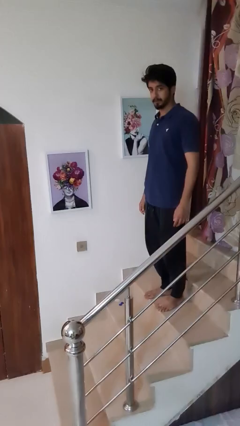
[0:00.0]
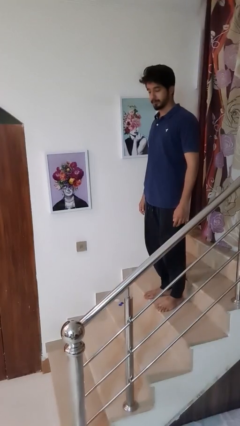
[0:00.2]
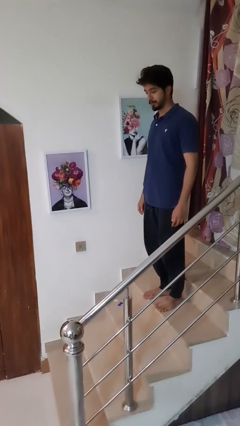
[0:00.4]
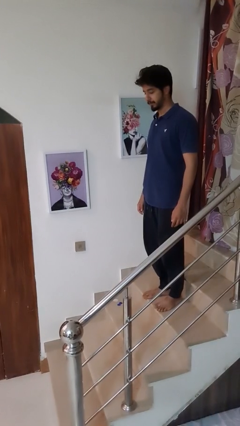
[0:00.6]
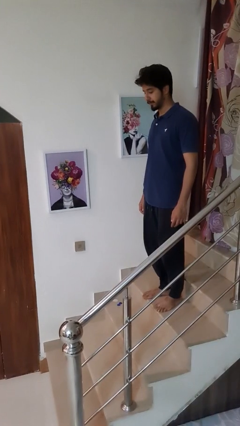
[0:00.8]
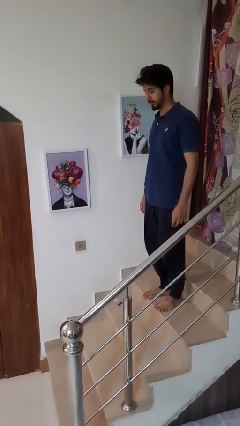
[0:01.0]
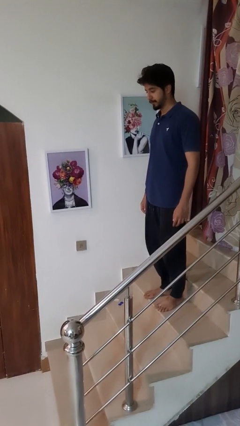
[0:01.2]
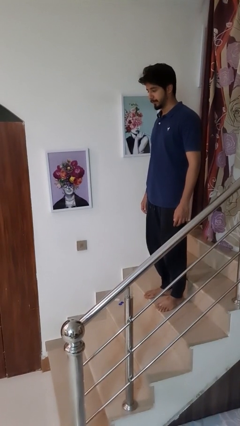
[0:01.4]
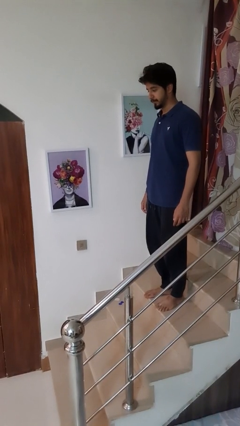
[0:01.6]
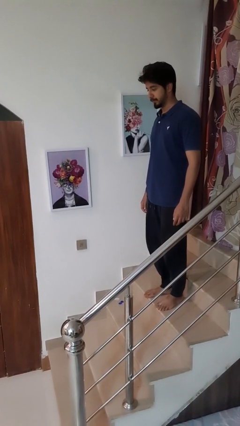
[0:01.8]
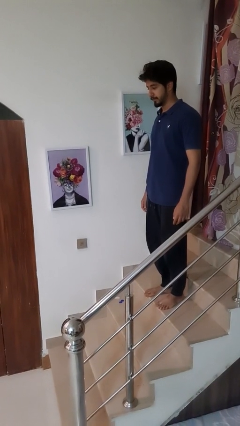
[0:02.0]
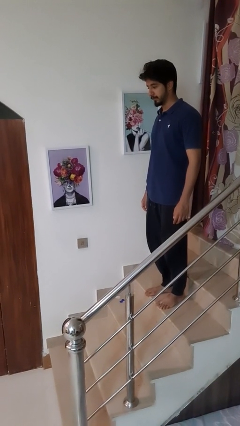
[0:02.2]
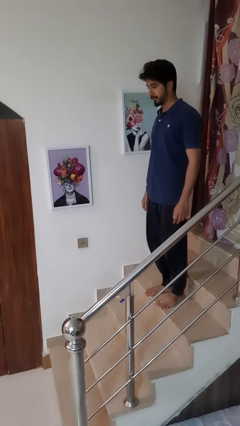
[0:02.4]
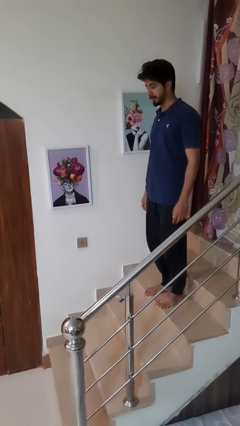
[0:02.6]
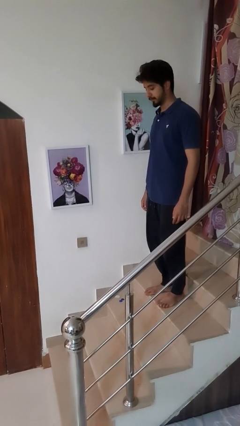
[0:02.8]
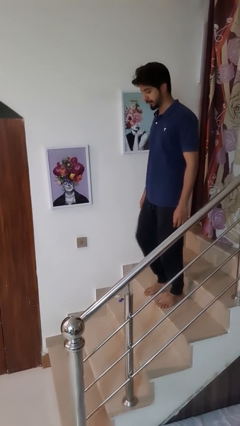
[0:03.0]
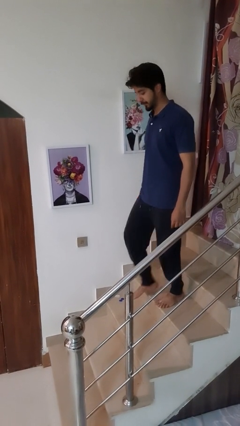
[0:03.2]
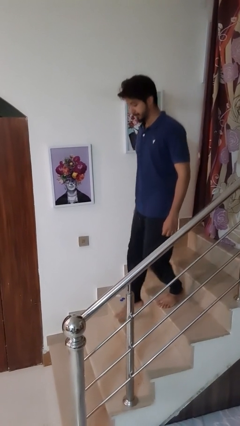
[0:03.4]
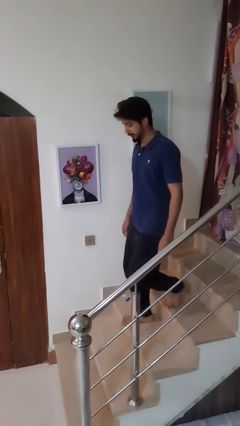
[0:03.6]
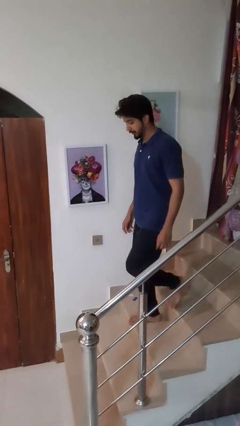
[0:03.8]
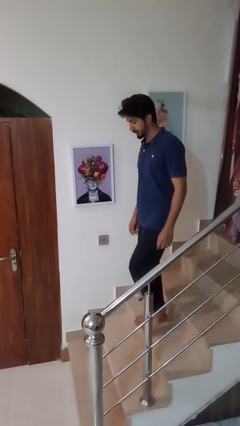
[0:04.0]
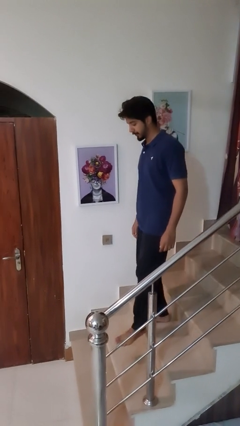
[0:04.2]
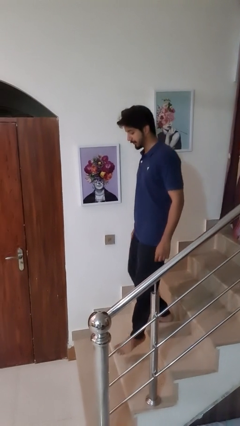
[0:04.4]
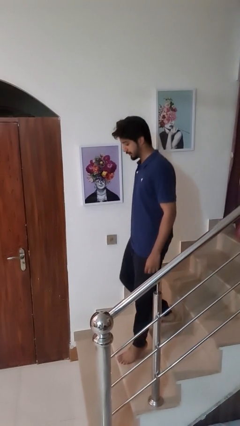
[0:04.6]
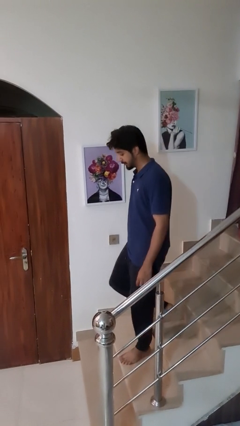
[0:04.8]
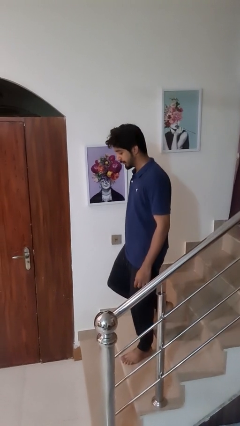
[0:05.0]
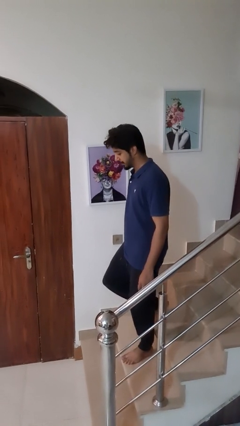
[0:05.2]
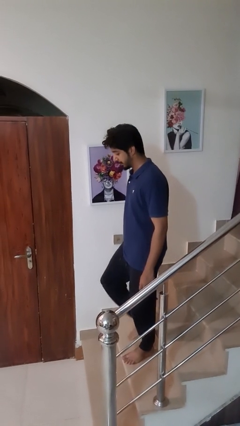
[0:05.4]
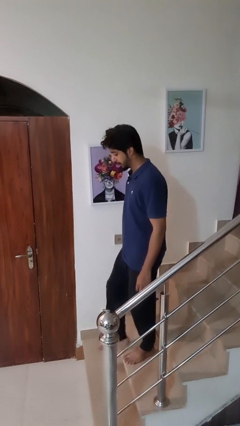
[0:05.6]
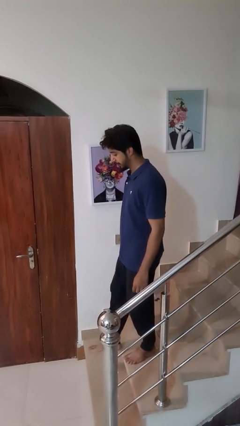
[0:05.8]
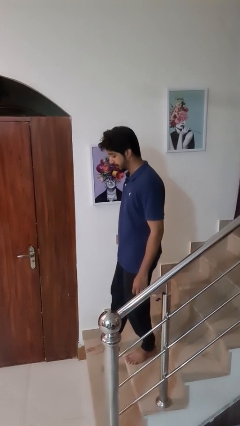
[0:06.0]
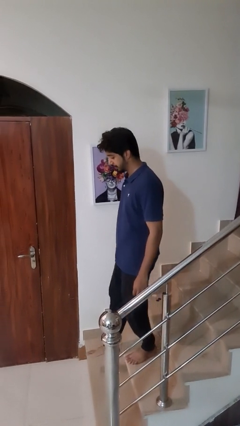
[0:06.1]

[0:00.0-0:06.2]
person climbs down stairs

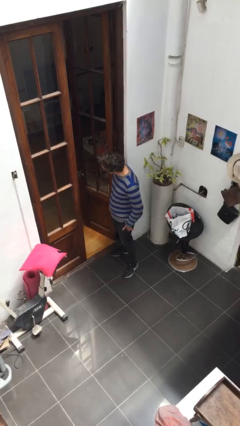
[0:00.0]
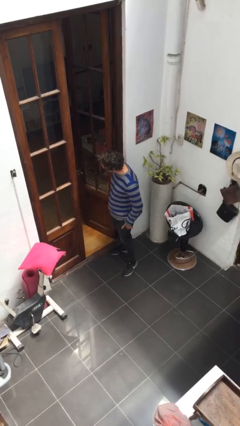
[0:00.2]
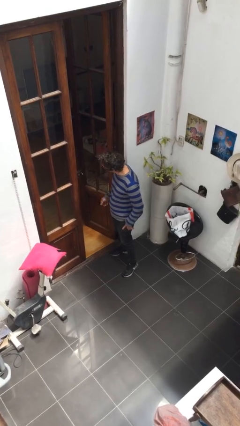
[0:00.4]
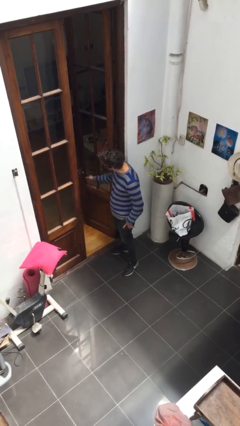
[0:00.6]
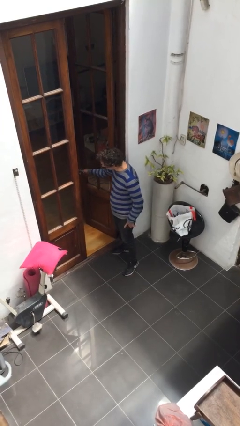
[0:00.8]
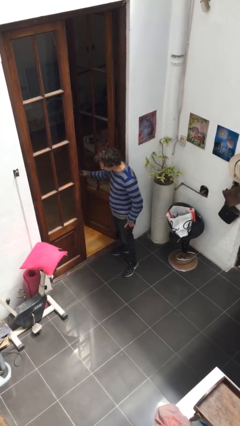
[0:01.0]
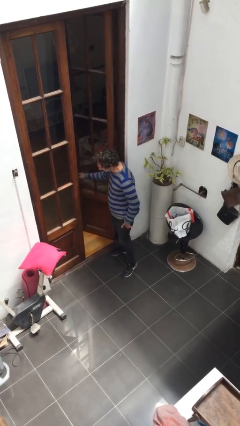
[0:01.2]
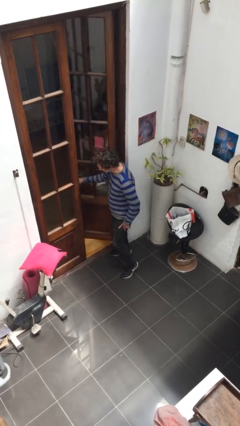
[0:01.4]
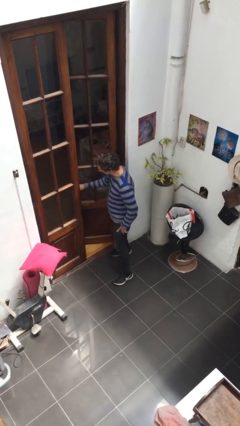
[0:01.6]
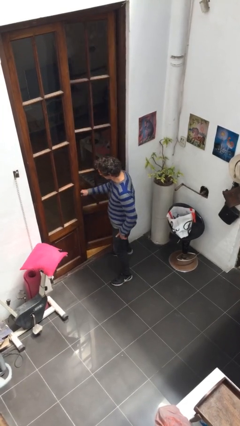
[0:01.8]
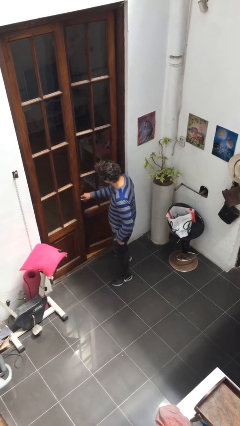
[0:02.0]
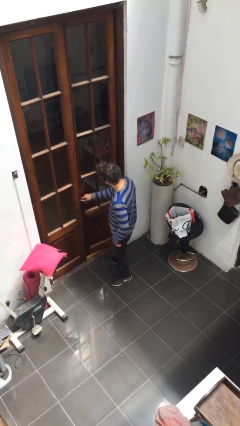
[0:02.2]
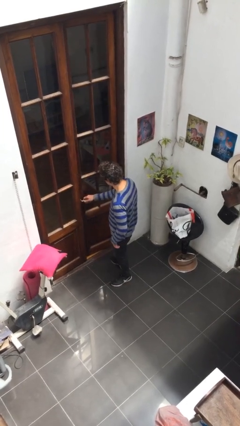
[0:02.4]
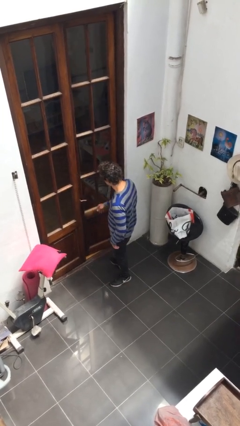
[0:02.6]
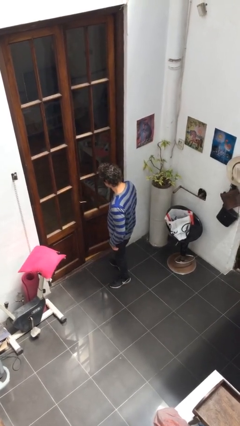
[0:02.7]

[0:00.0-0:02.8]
person closes facility door

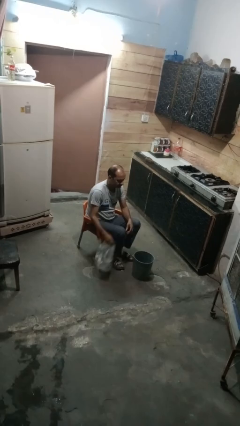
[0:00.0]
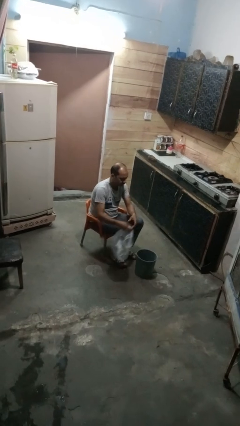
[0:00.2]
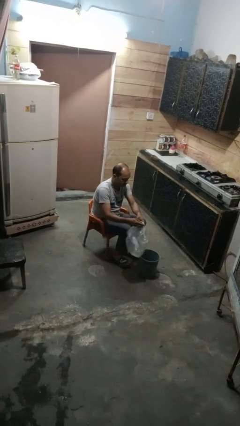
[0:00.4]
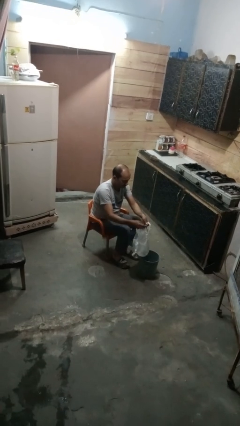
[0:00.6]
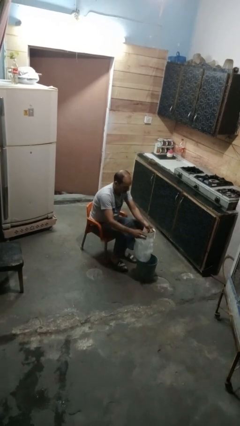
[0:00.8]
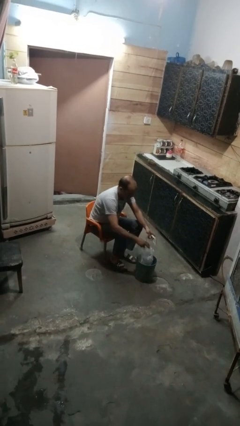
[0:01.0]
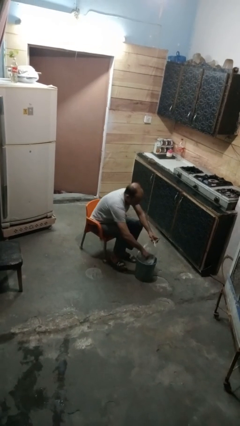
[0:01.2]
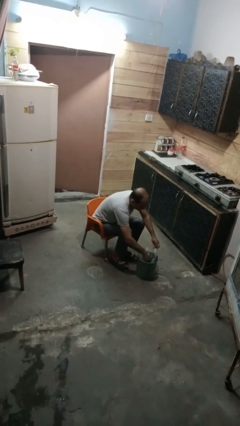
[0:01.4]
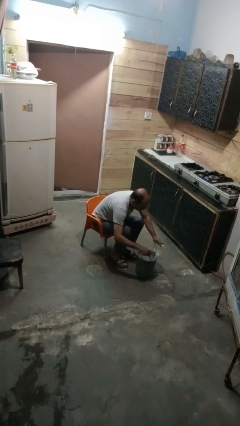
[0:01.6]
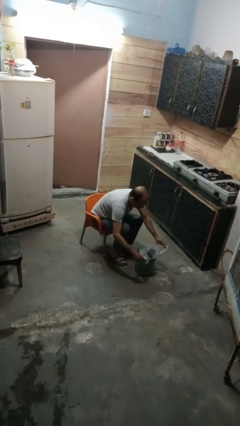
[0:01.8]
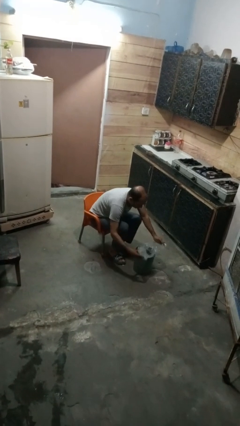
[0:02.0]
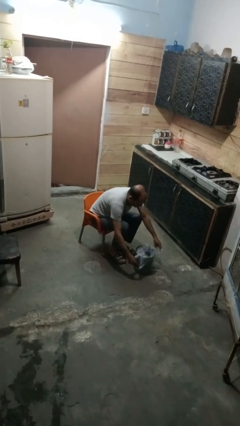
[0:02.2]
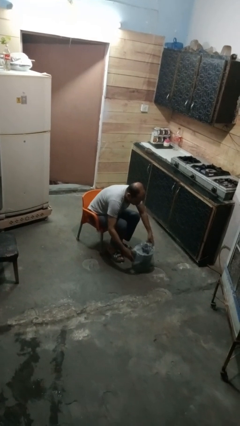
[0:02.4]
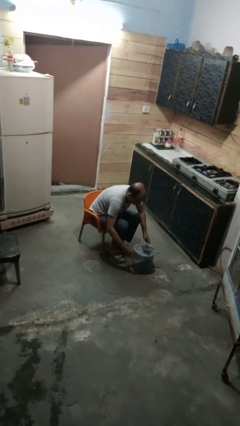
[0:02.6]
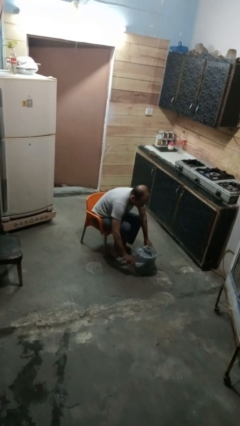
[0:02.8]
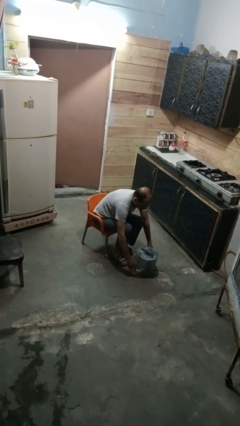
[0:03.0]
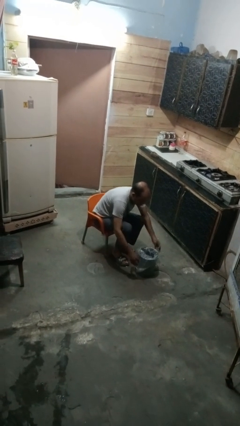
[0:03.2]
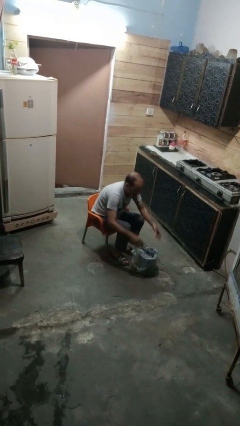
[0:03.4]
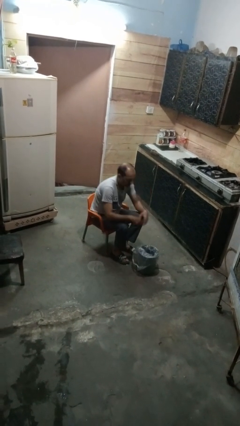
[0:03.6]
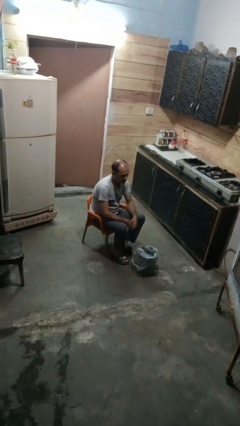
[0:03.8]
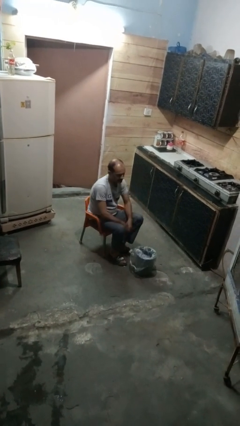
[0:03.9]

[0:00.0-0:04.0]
person inserts trashbag into trashcan

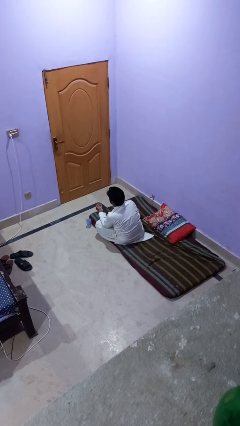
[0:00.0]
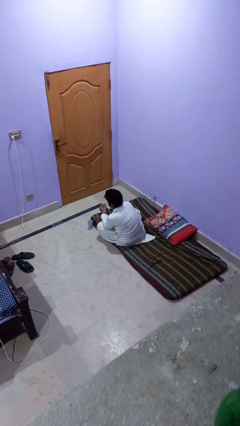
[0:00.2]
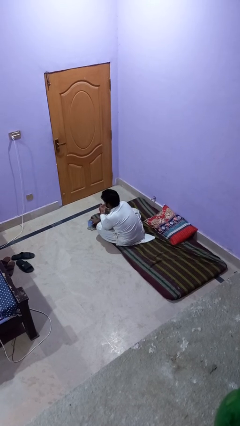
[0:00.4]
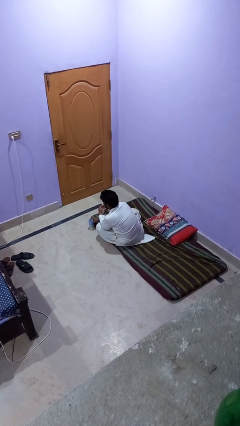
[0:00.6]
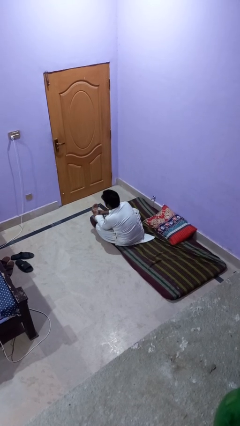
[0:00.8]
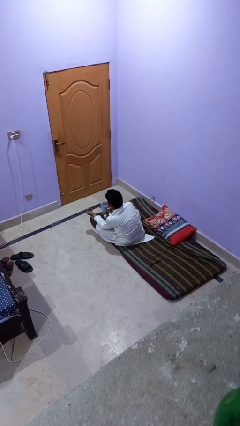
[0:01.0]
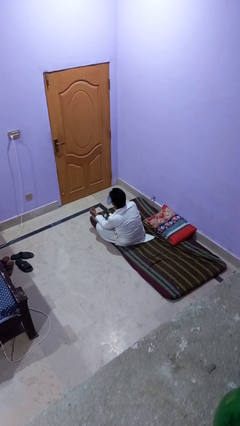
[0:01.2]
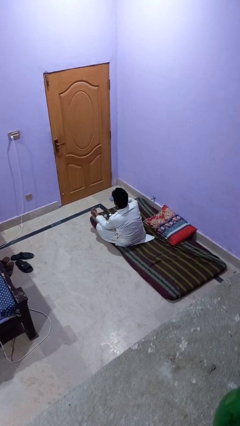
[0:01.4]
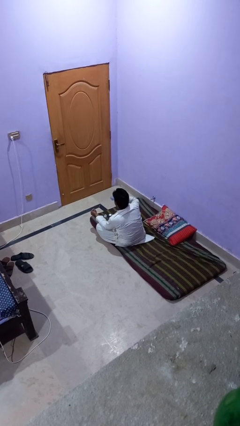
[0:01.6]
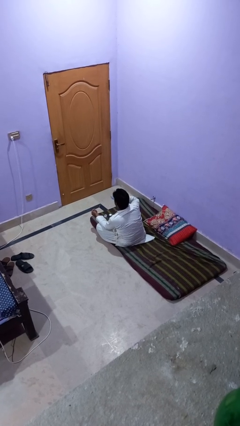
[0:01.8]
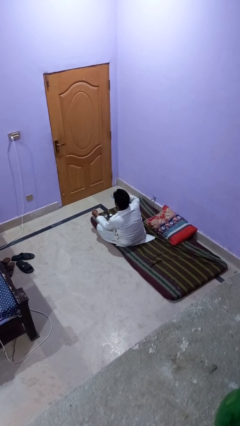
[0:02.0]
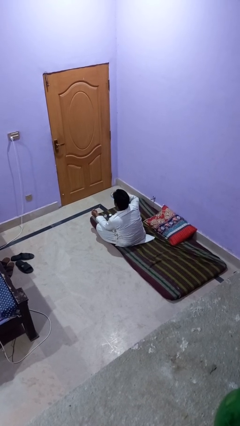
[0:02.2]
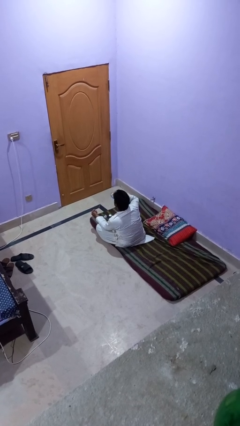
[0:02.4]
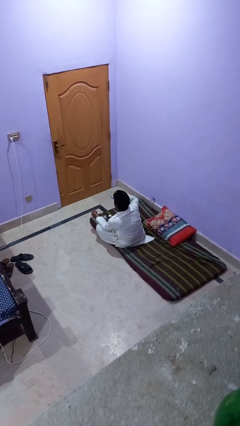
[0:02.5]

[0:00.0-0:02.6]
person drinks from cup

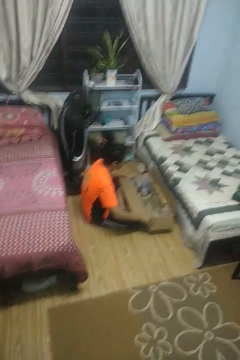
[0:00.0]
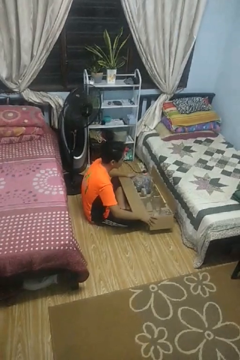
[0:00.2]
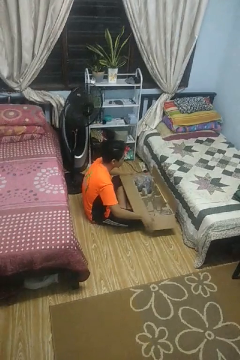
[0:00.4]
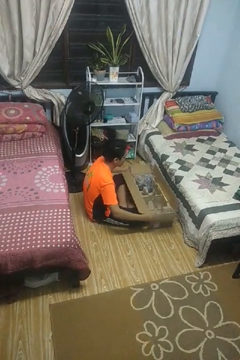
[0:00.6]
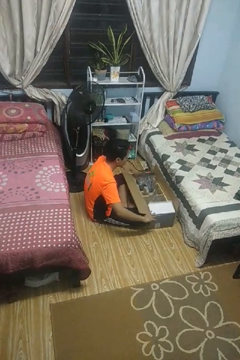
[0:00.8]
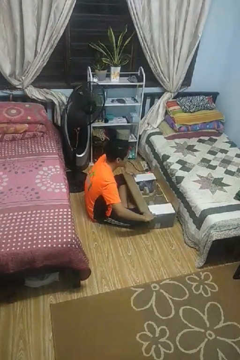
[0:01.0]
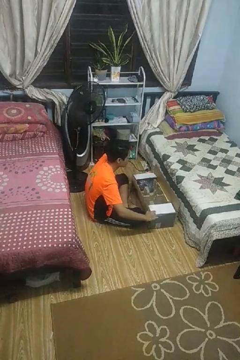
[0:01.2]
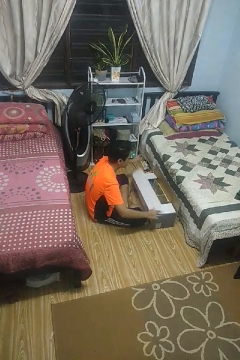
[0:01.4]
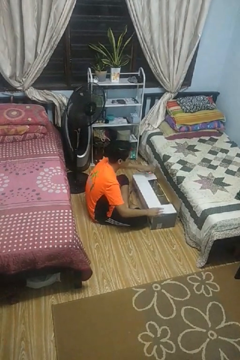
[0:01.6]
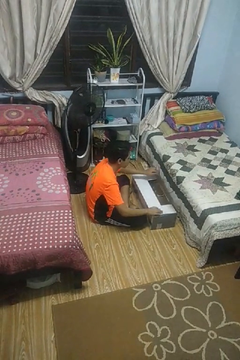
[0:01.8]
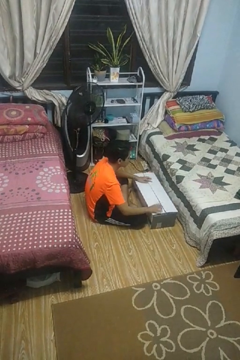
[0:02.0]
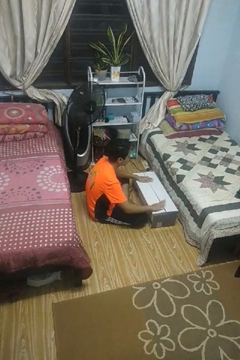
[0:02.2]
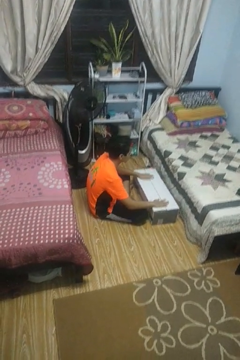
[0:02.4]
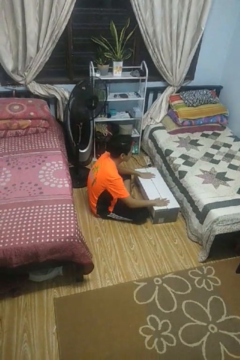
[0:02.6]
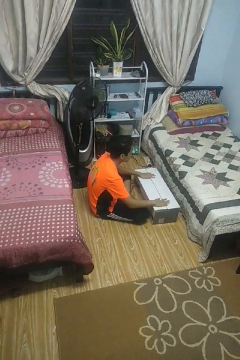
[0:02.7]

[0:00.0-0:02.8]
person closes box
